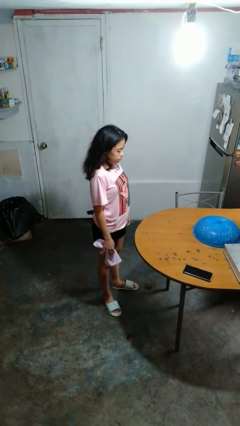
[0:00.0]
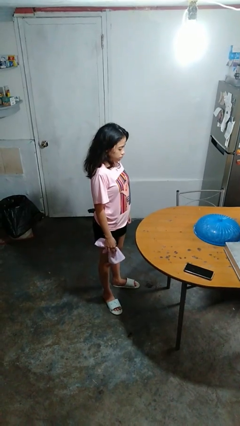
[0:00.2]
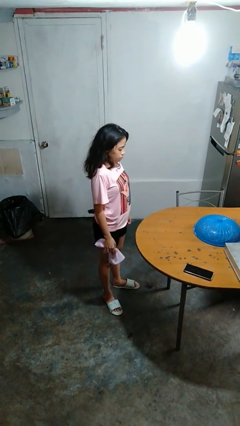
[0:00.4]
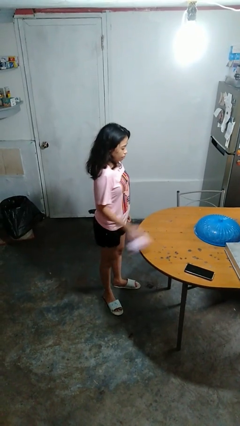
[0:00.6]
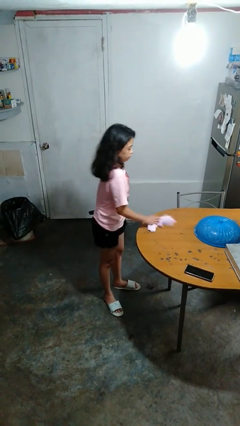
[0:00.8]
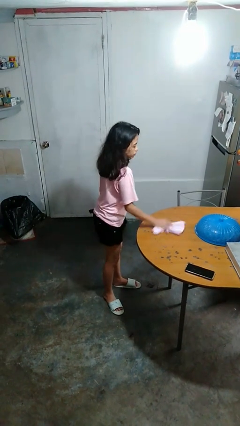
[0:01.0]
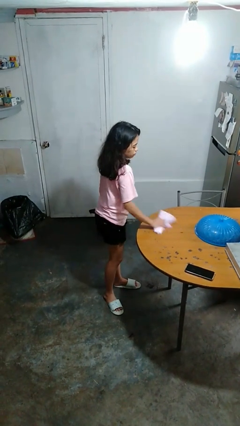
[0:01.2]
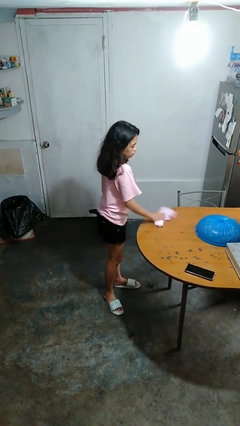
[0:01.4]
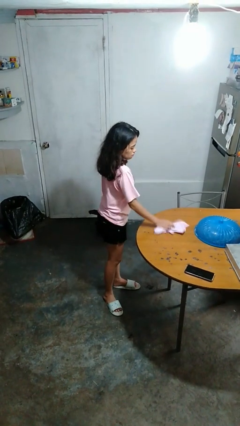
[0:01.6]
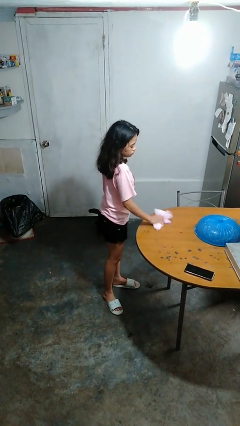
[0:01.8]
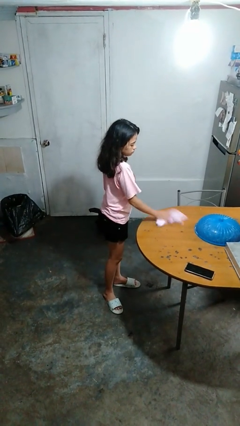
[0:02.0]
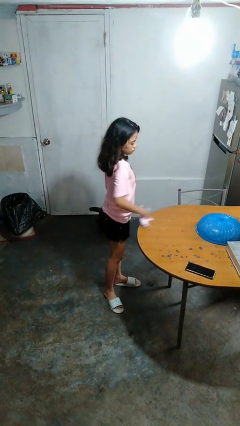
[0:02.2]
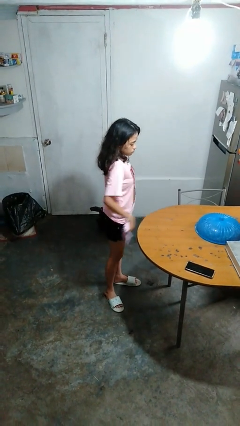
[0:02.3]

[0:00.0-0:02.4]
person cleans table with rag

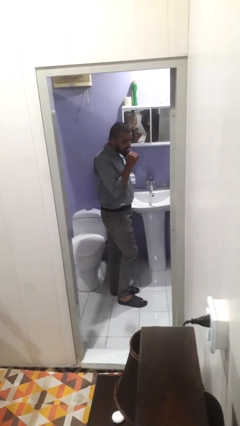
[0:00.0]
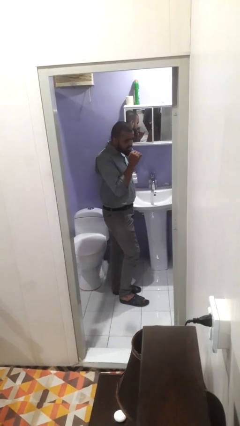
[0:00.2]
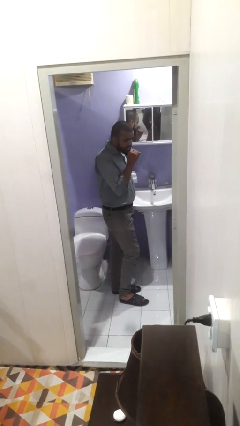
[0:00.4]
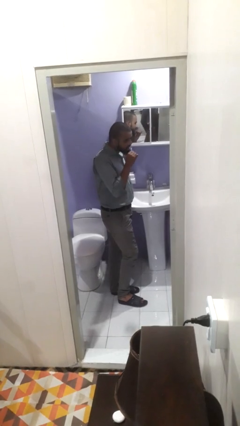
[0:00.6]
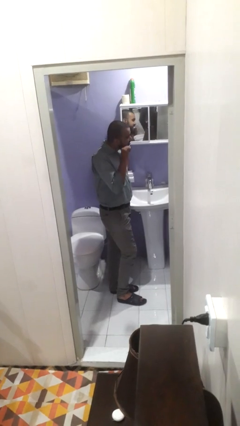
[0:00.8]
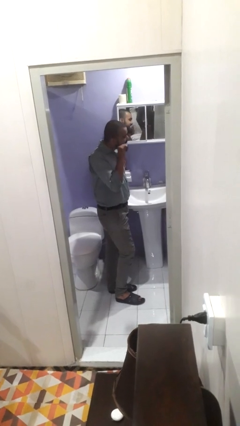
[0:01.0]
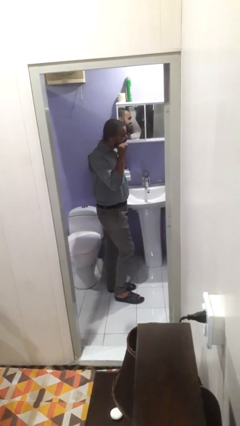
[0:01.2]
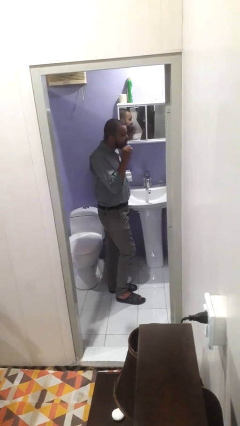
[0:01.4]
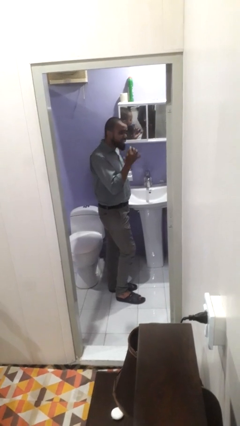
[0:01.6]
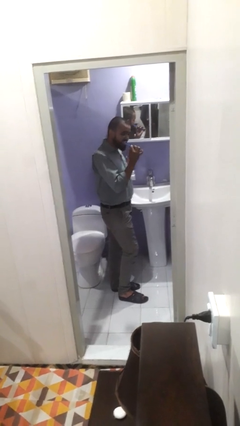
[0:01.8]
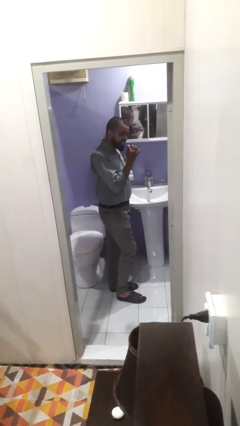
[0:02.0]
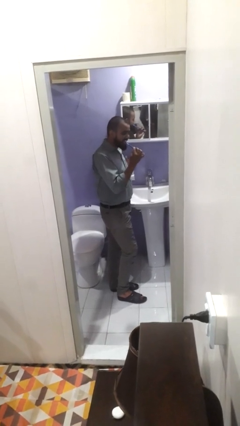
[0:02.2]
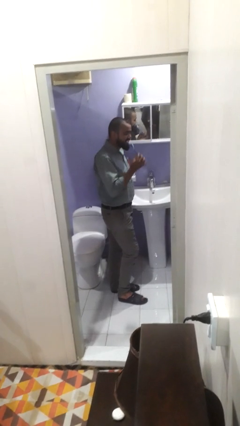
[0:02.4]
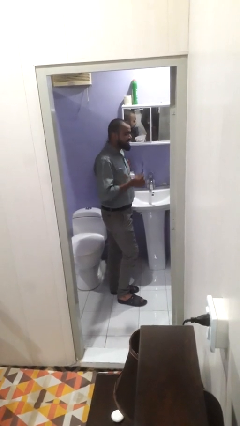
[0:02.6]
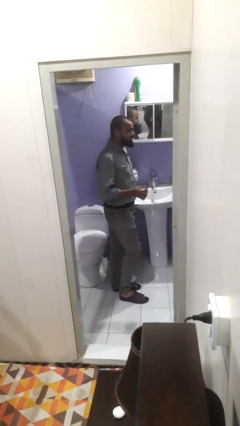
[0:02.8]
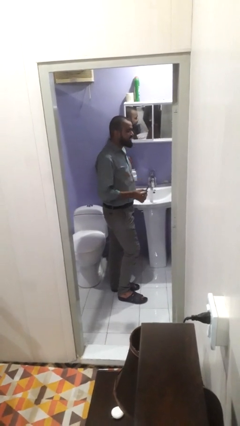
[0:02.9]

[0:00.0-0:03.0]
person brushes teeth

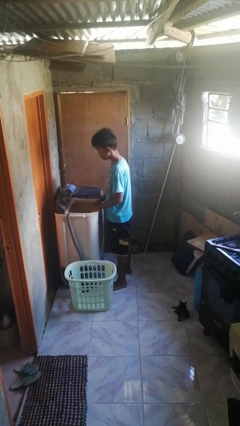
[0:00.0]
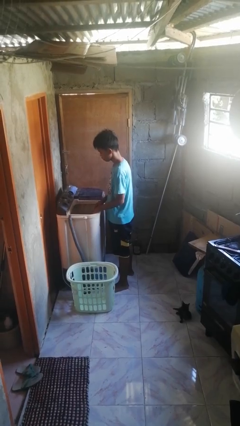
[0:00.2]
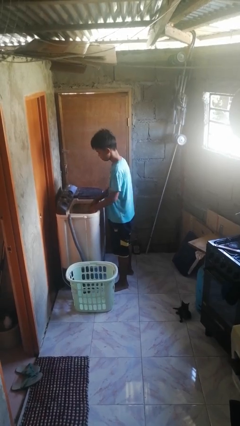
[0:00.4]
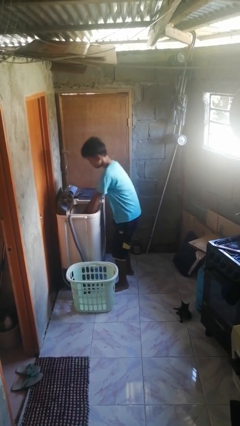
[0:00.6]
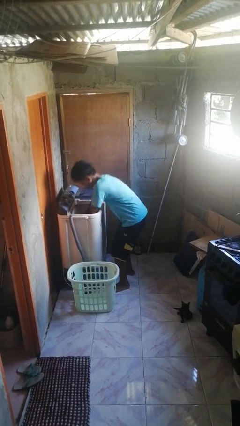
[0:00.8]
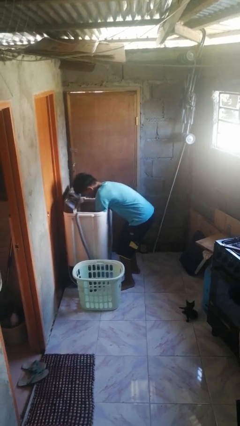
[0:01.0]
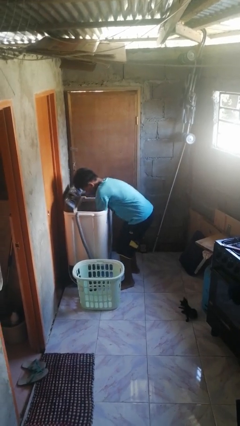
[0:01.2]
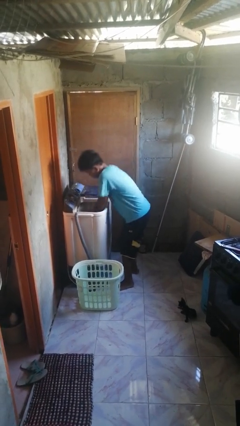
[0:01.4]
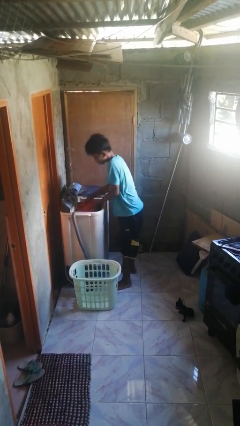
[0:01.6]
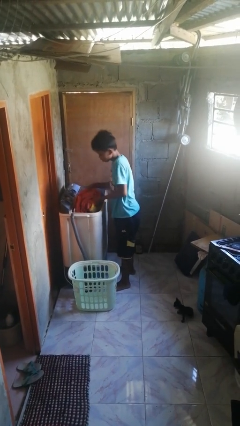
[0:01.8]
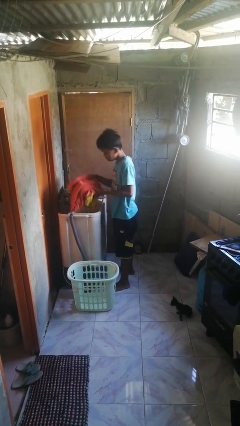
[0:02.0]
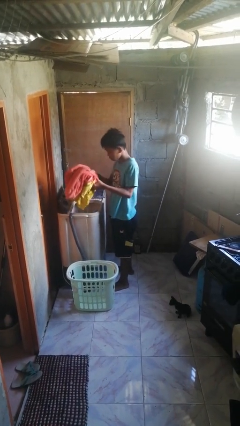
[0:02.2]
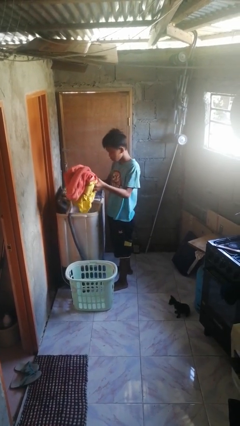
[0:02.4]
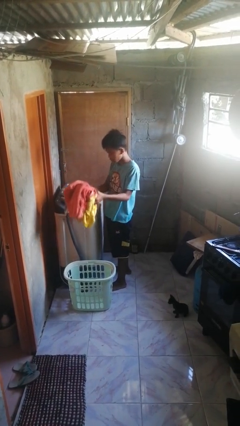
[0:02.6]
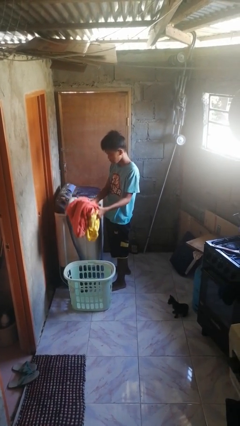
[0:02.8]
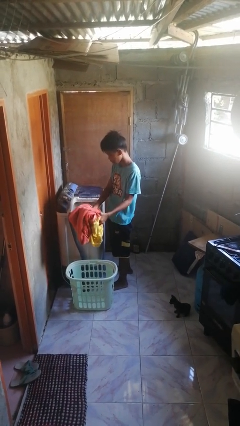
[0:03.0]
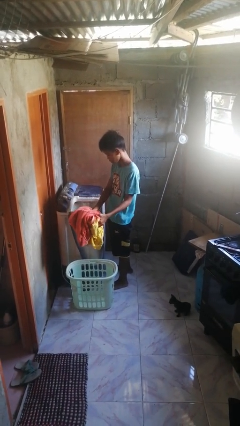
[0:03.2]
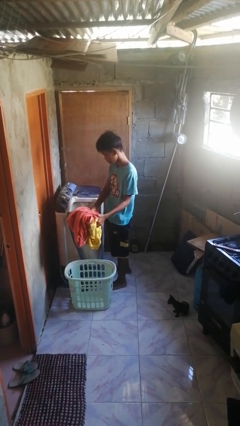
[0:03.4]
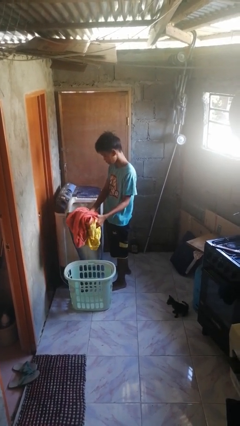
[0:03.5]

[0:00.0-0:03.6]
person unloads clotheswasher

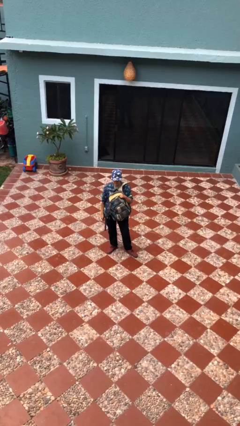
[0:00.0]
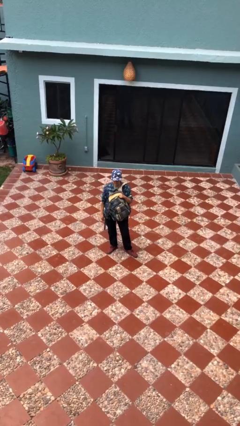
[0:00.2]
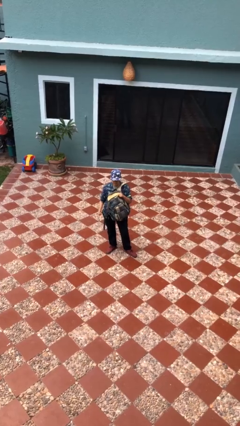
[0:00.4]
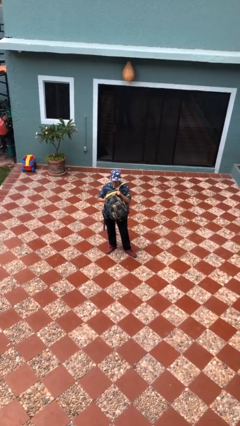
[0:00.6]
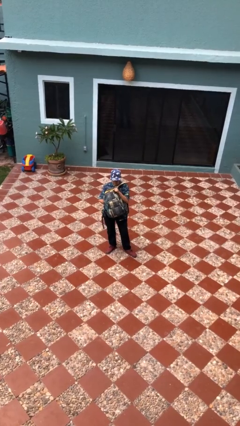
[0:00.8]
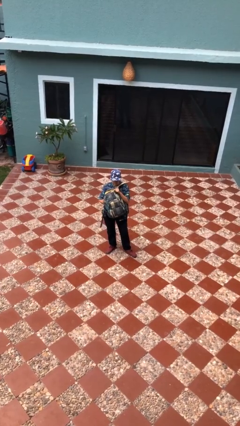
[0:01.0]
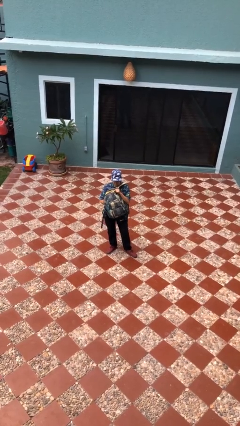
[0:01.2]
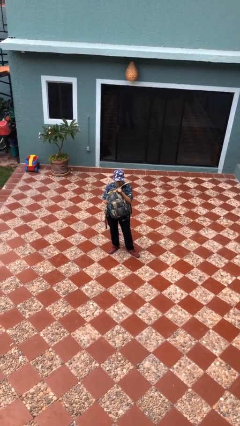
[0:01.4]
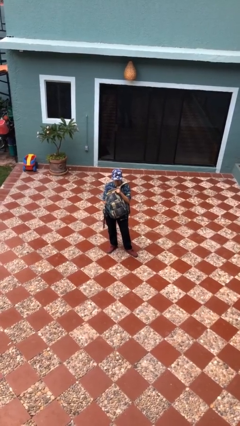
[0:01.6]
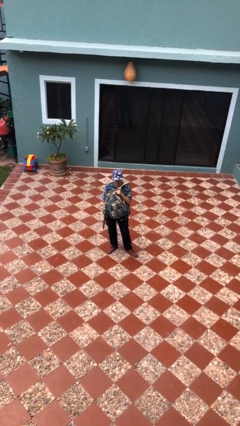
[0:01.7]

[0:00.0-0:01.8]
person searches in backpack

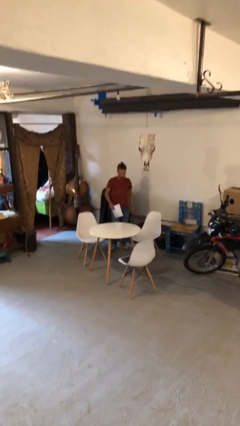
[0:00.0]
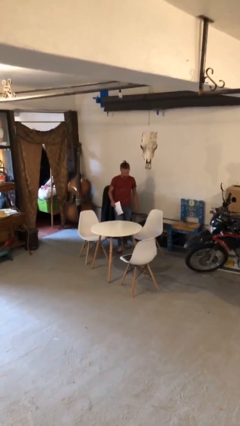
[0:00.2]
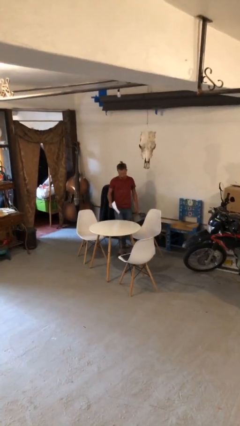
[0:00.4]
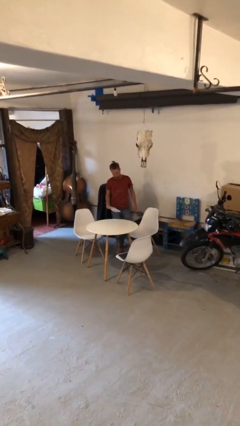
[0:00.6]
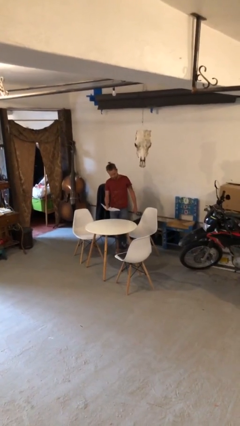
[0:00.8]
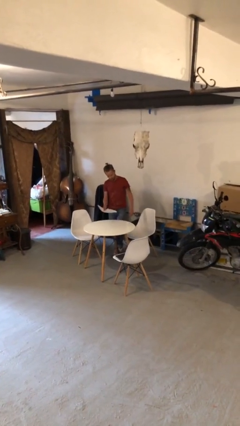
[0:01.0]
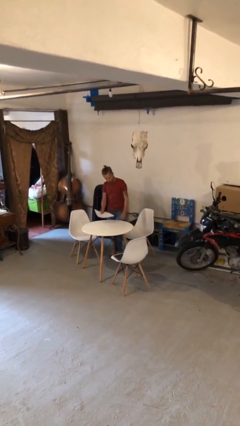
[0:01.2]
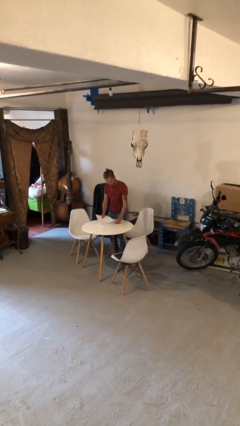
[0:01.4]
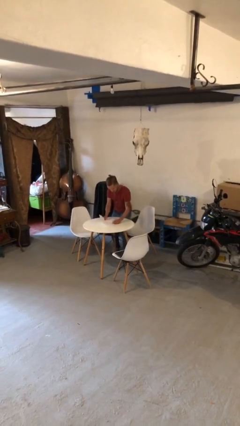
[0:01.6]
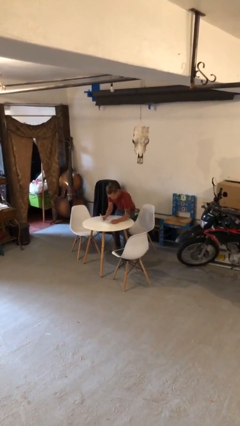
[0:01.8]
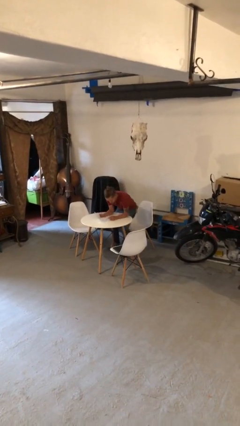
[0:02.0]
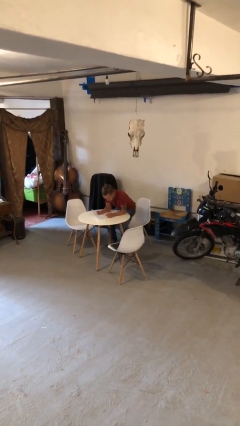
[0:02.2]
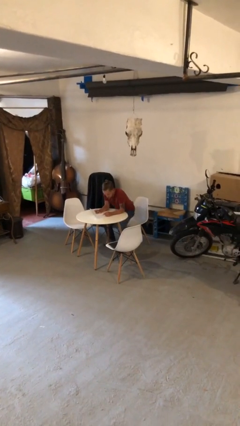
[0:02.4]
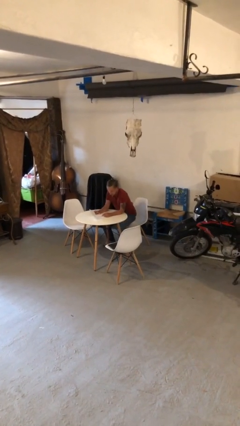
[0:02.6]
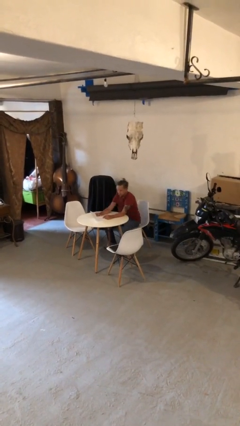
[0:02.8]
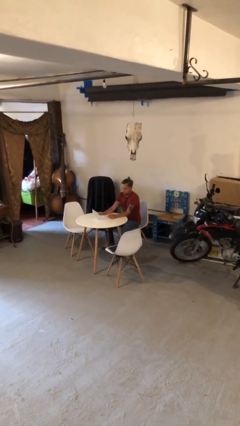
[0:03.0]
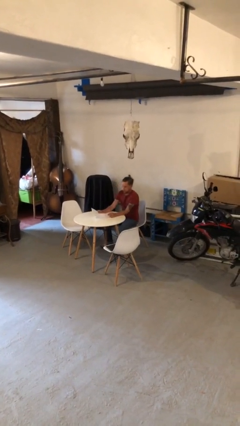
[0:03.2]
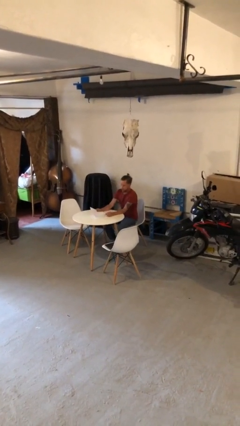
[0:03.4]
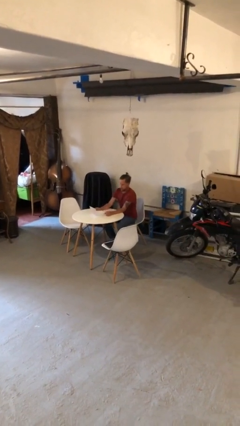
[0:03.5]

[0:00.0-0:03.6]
person sits down

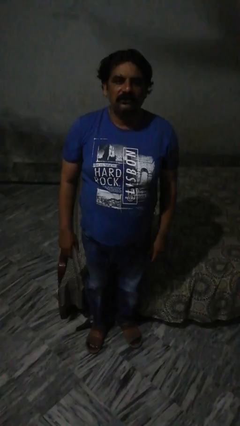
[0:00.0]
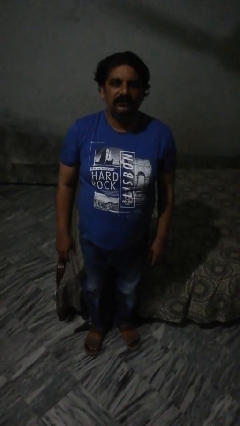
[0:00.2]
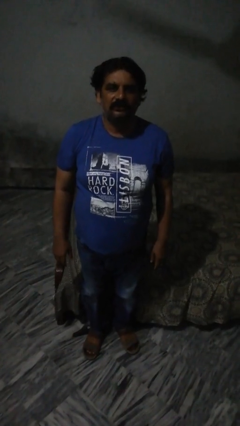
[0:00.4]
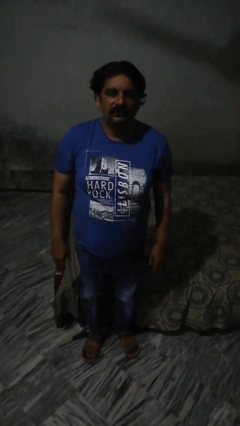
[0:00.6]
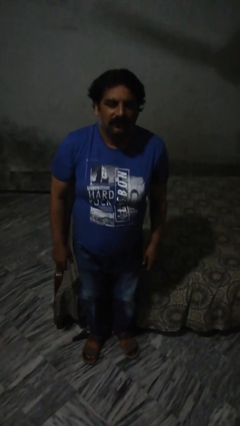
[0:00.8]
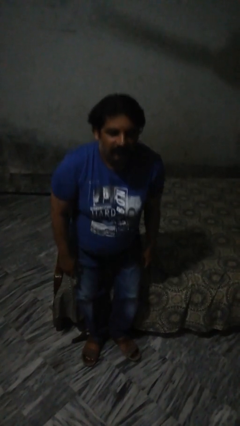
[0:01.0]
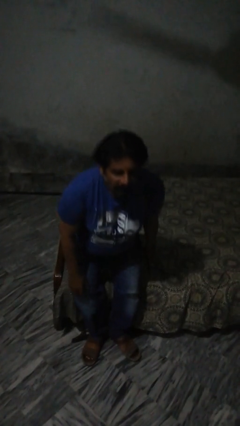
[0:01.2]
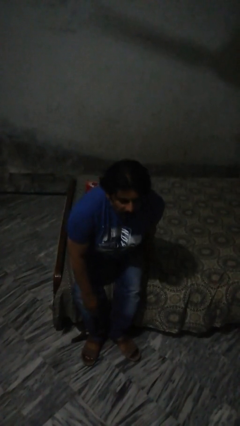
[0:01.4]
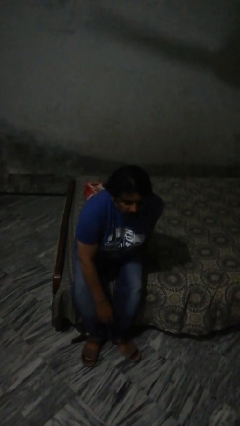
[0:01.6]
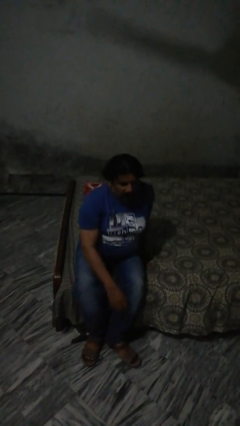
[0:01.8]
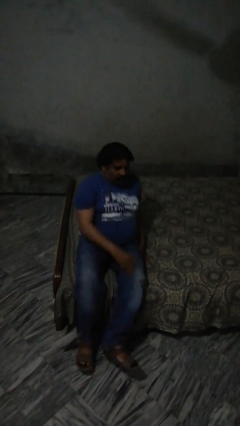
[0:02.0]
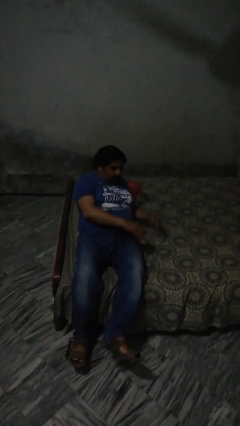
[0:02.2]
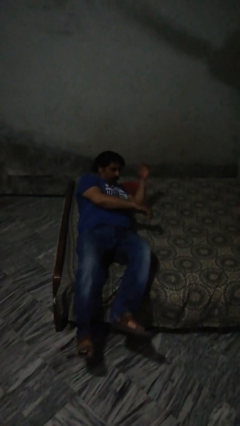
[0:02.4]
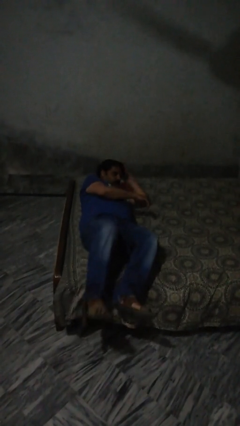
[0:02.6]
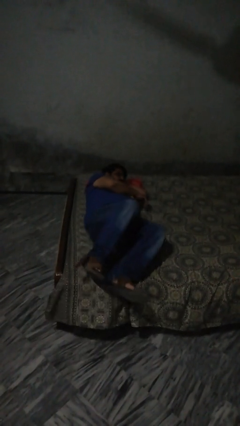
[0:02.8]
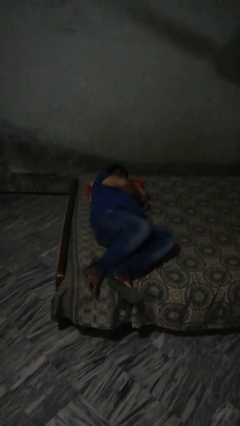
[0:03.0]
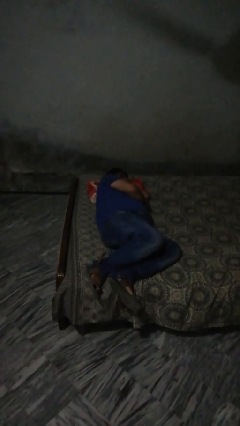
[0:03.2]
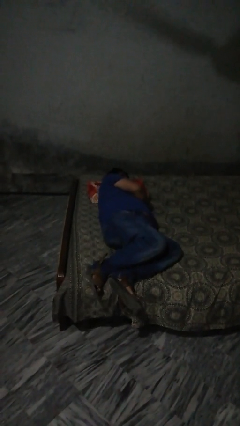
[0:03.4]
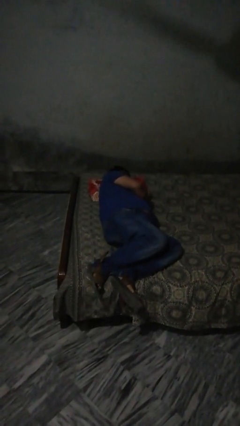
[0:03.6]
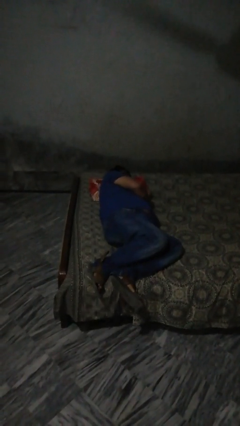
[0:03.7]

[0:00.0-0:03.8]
person lies down on bed
